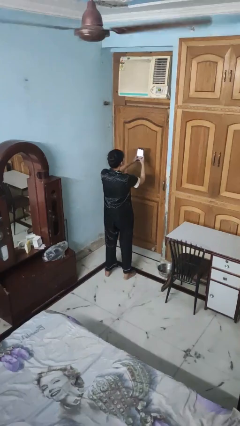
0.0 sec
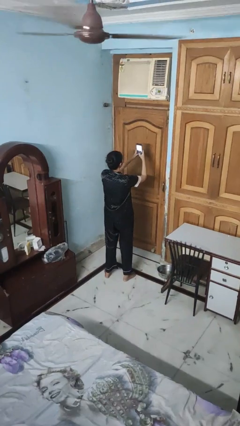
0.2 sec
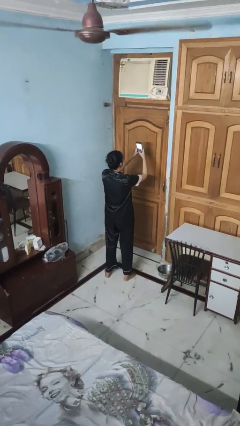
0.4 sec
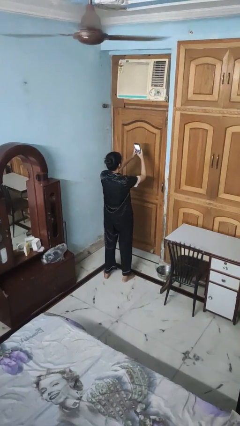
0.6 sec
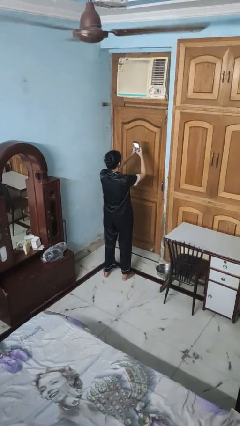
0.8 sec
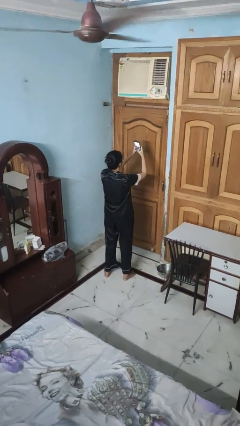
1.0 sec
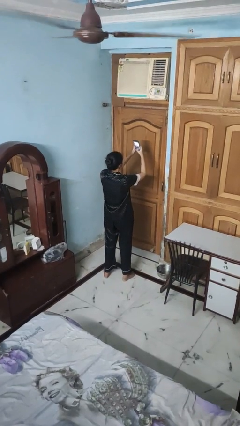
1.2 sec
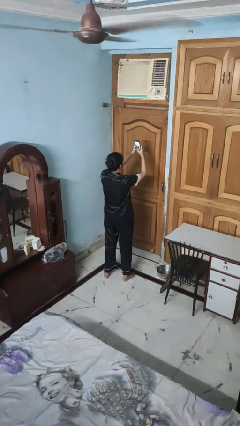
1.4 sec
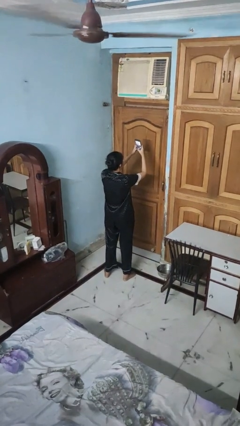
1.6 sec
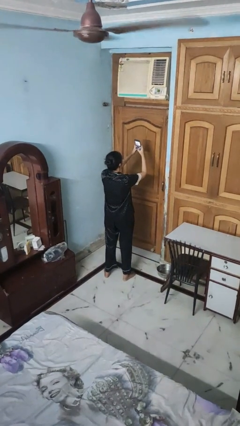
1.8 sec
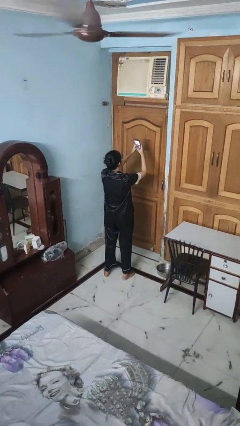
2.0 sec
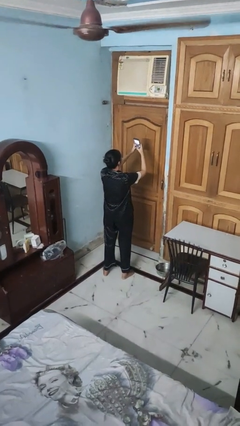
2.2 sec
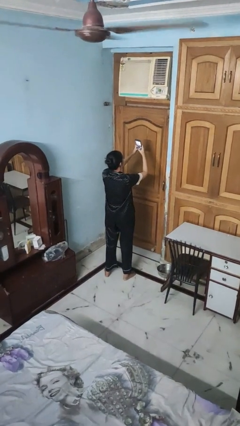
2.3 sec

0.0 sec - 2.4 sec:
person takes selfie

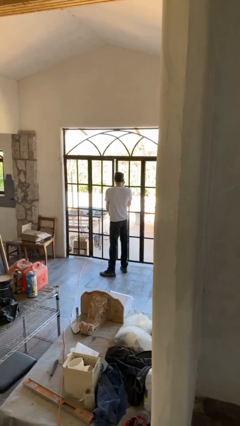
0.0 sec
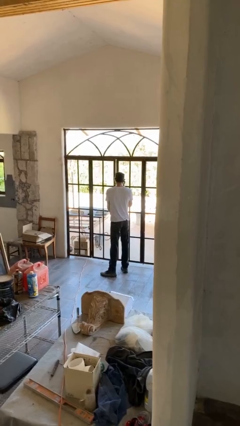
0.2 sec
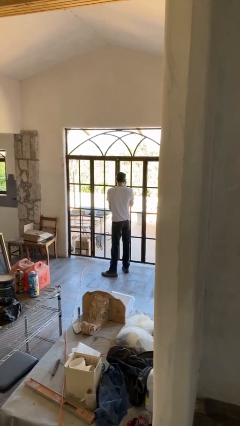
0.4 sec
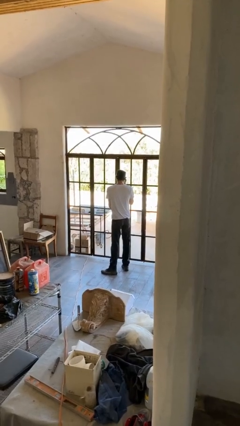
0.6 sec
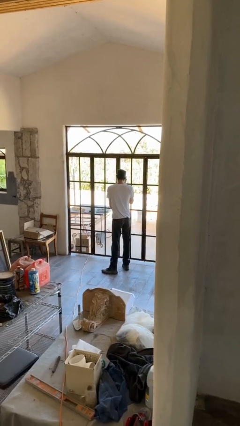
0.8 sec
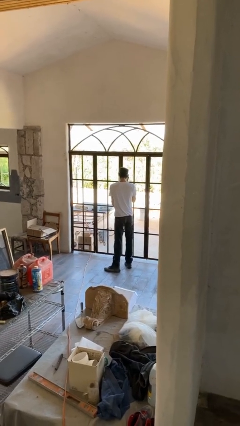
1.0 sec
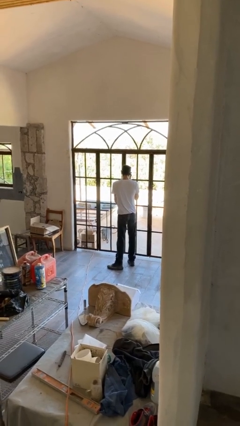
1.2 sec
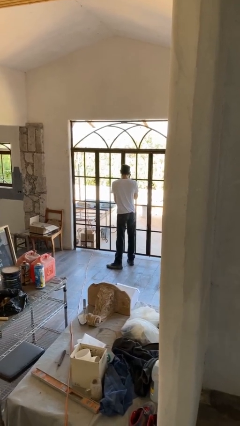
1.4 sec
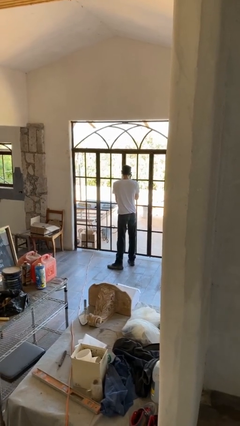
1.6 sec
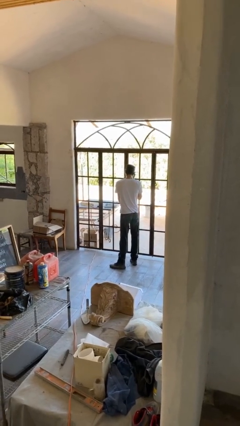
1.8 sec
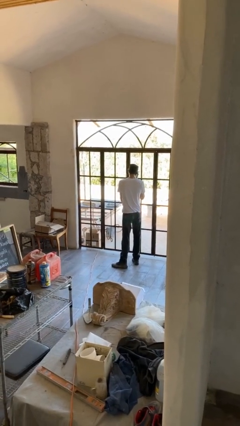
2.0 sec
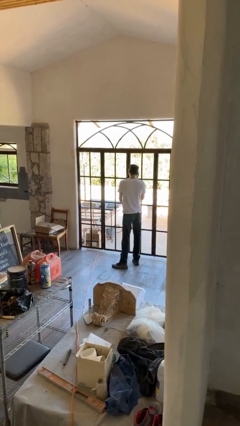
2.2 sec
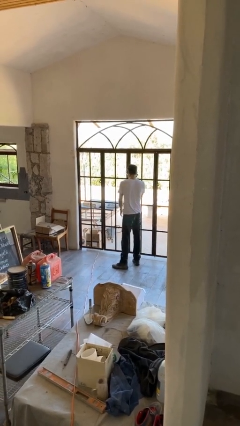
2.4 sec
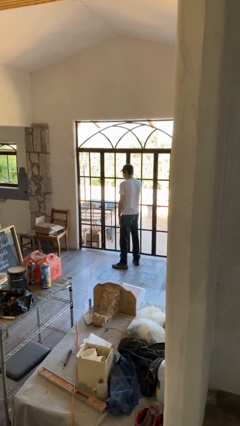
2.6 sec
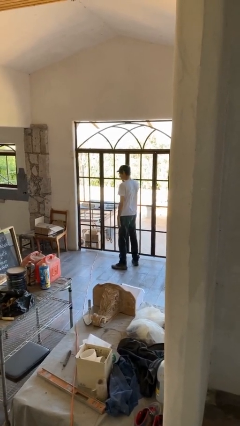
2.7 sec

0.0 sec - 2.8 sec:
person closes facility door

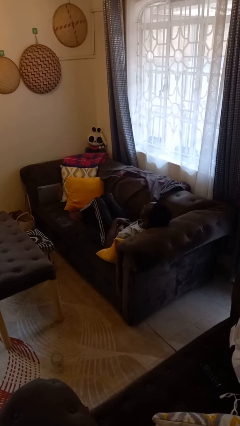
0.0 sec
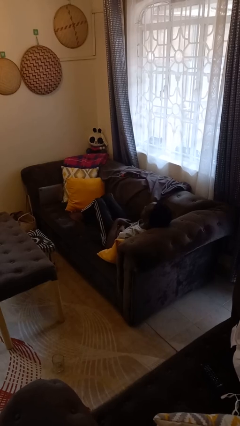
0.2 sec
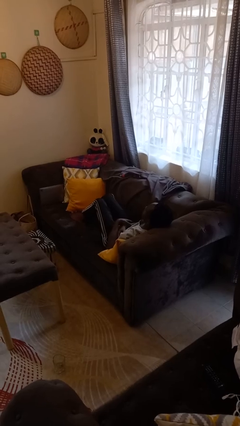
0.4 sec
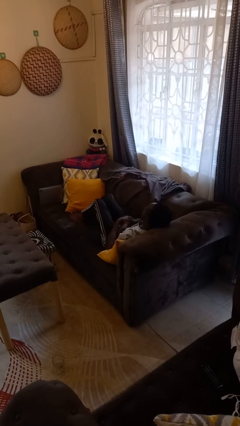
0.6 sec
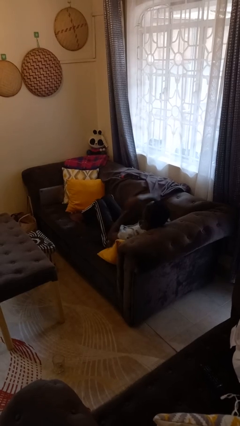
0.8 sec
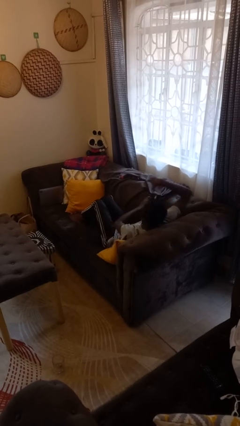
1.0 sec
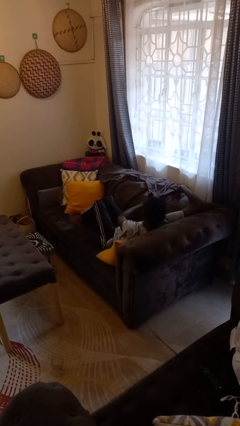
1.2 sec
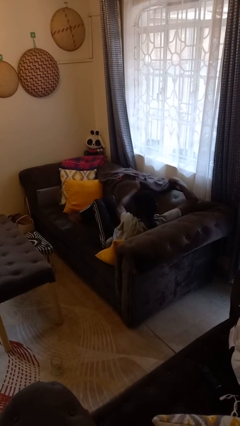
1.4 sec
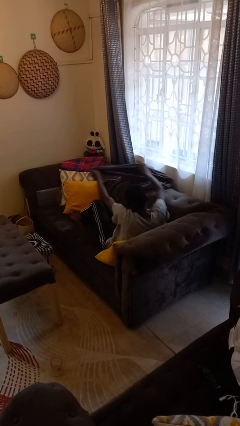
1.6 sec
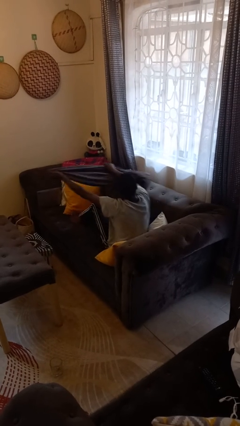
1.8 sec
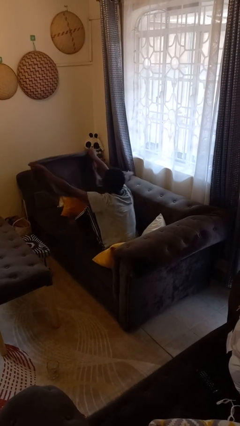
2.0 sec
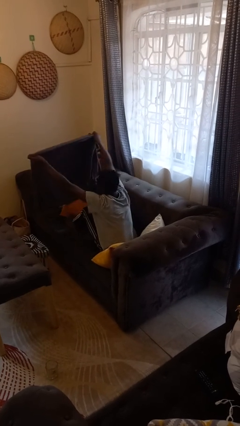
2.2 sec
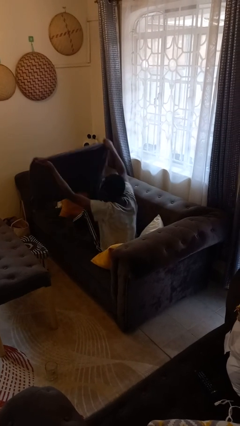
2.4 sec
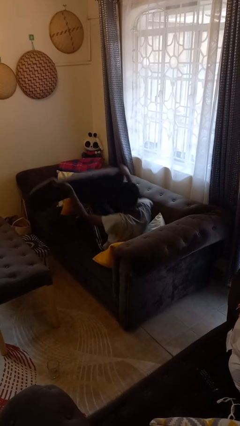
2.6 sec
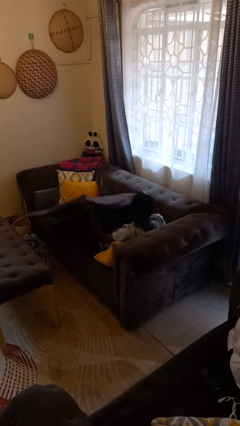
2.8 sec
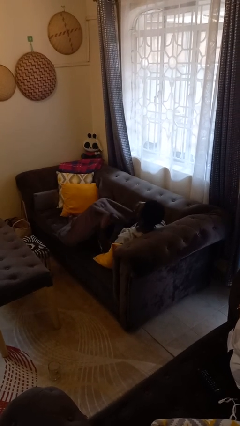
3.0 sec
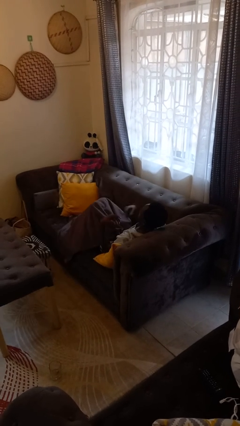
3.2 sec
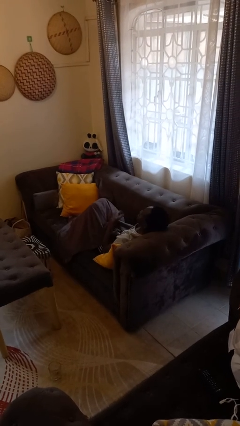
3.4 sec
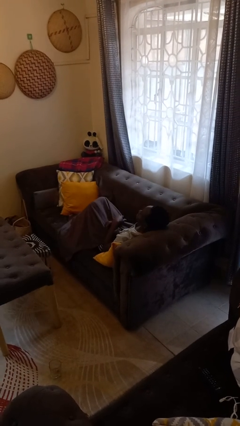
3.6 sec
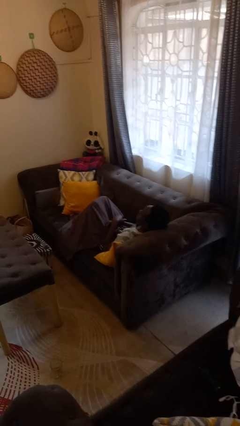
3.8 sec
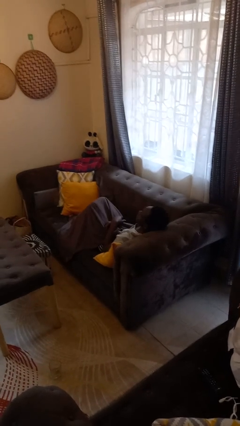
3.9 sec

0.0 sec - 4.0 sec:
person covers with blanket

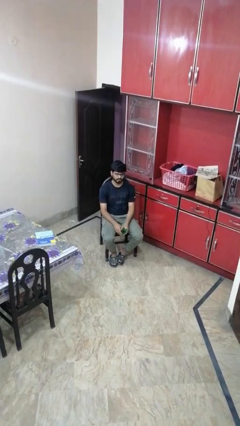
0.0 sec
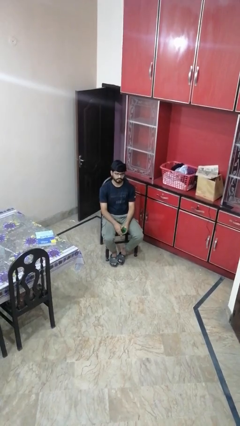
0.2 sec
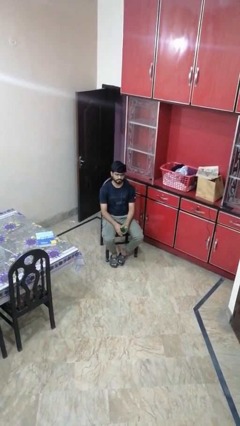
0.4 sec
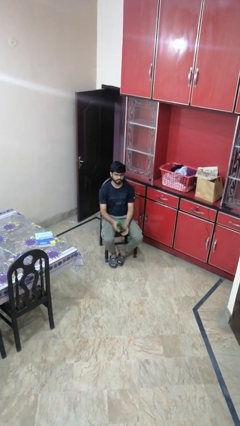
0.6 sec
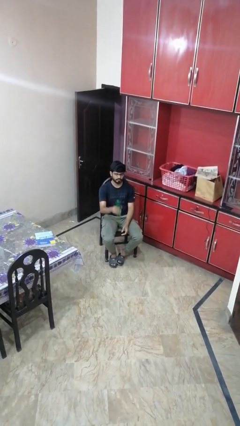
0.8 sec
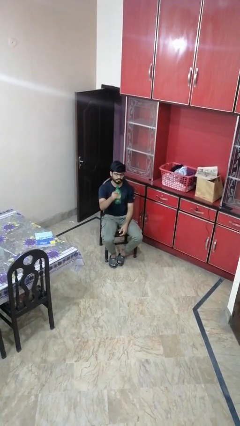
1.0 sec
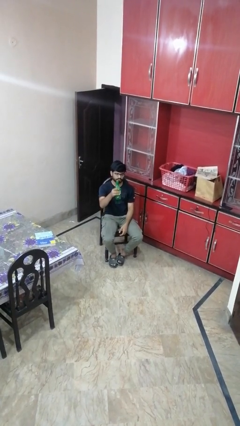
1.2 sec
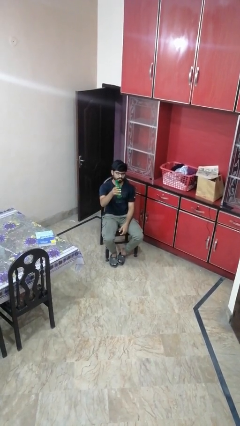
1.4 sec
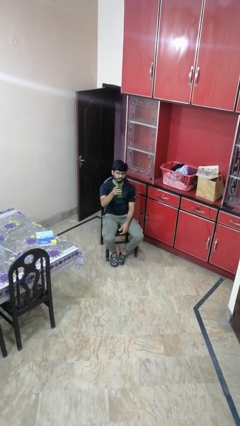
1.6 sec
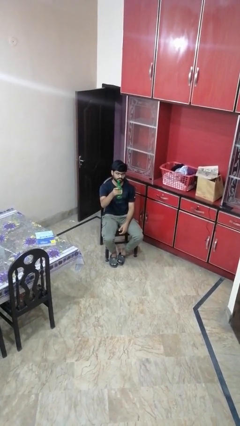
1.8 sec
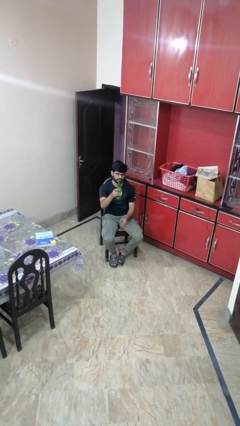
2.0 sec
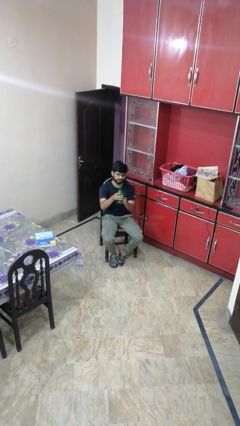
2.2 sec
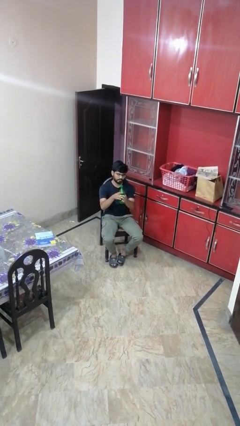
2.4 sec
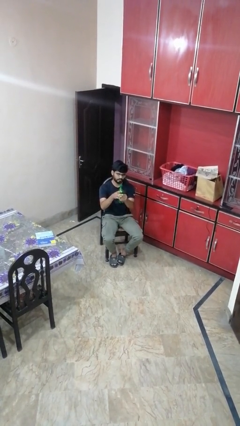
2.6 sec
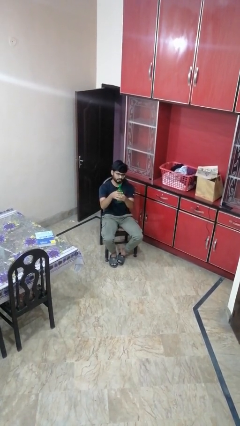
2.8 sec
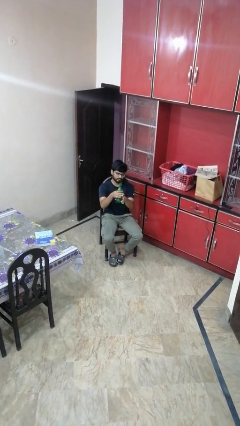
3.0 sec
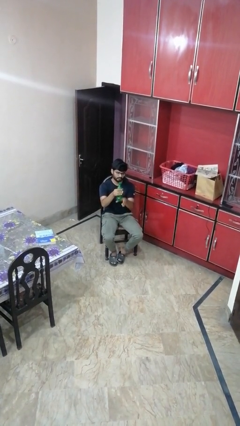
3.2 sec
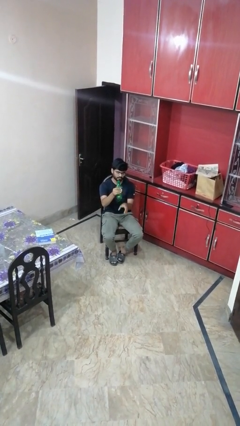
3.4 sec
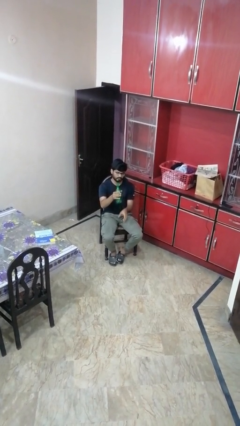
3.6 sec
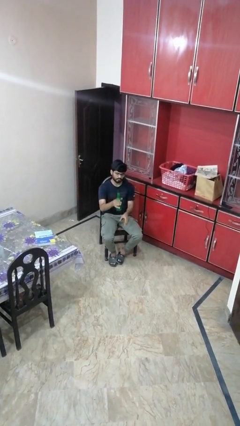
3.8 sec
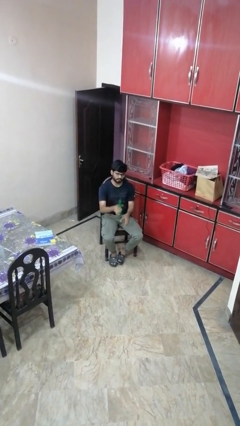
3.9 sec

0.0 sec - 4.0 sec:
person squeezes object

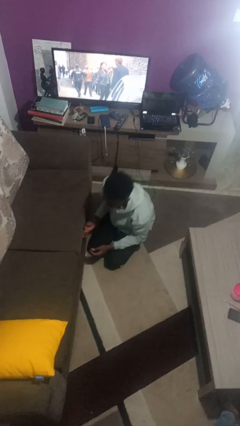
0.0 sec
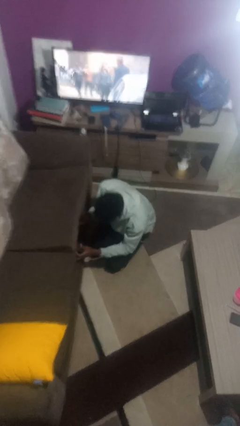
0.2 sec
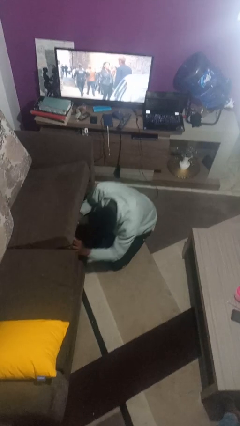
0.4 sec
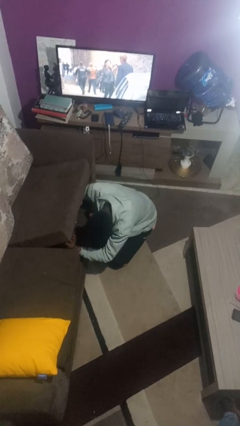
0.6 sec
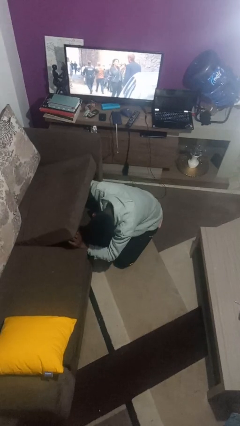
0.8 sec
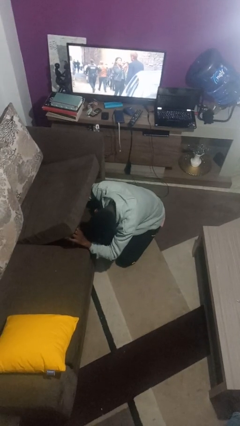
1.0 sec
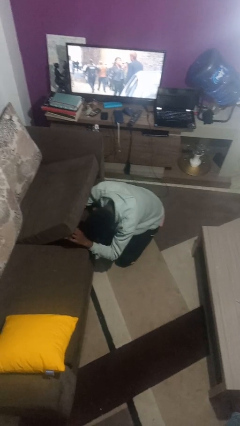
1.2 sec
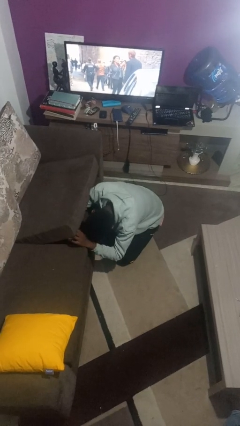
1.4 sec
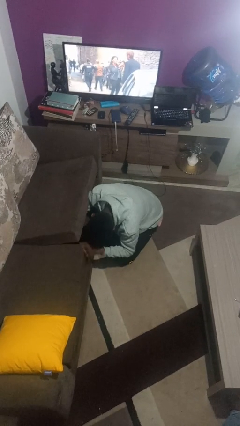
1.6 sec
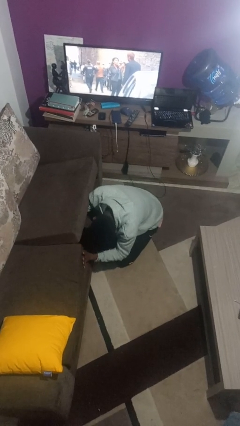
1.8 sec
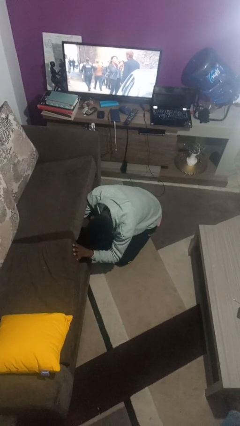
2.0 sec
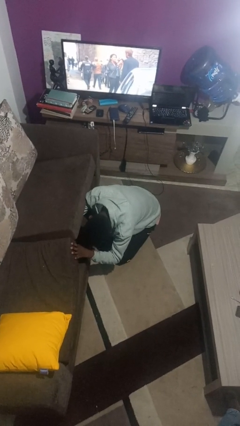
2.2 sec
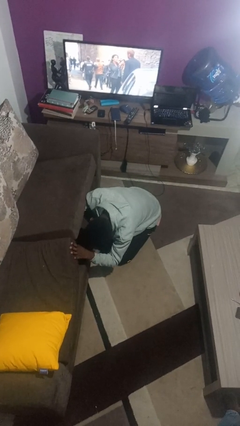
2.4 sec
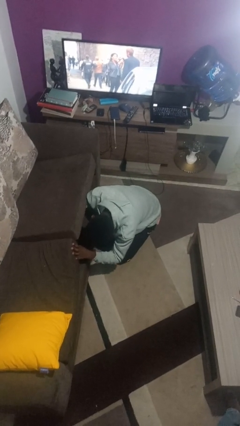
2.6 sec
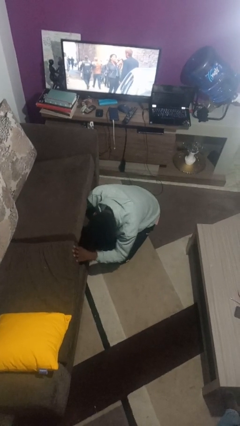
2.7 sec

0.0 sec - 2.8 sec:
person searches under couch

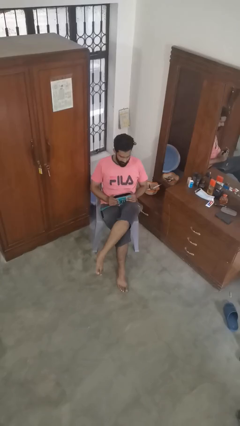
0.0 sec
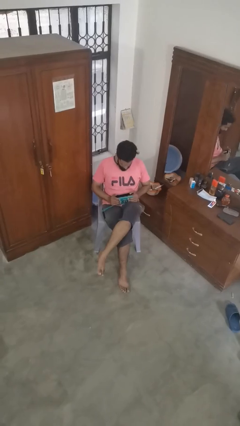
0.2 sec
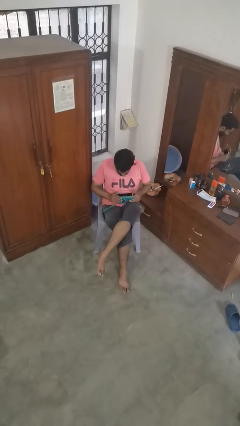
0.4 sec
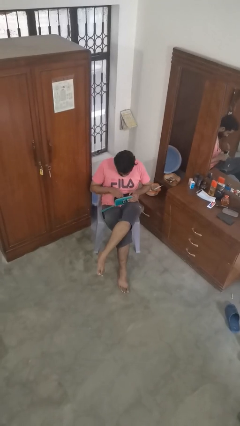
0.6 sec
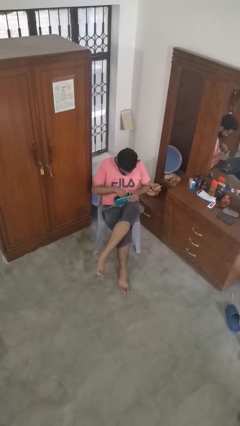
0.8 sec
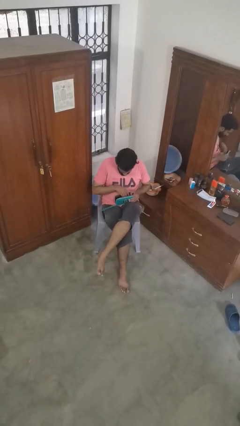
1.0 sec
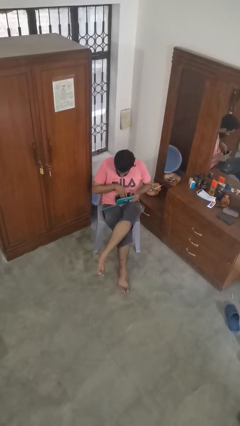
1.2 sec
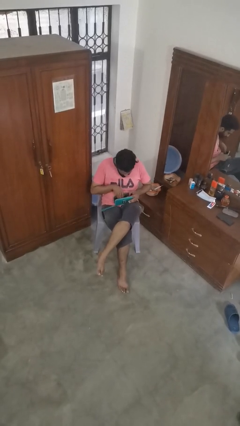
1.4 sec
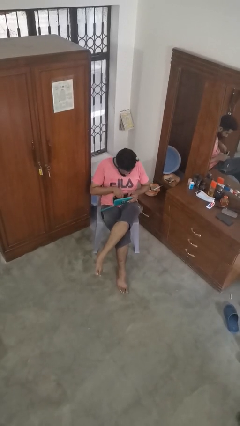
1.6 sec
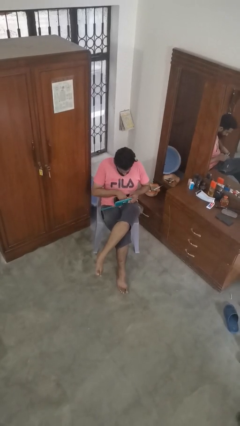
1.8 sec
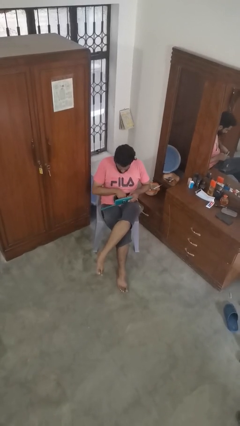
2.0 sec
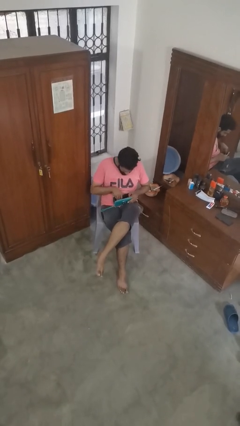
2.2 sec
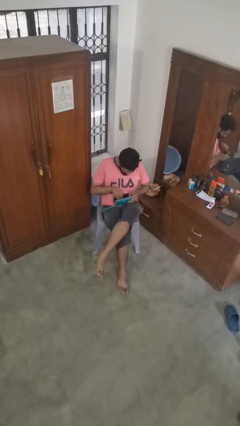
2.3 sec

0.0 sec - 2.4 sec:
person searches in purse
